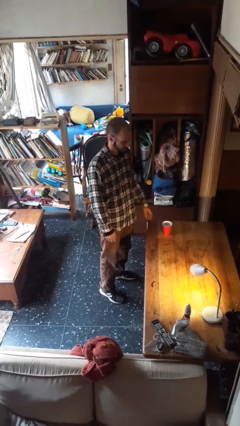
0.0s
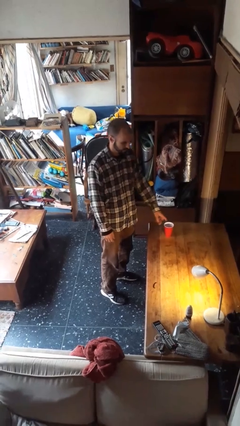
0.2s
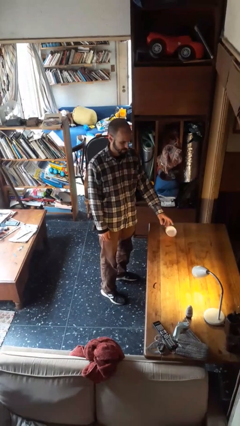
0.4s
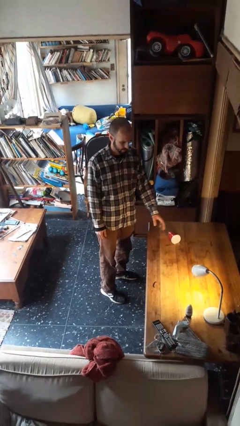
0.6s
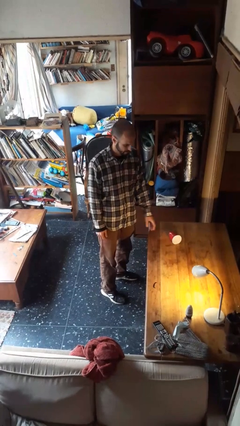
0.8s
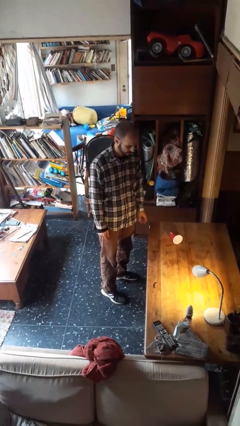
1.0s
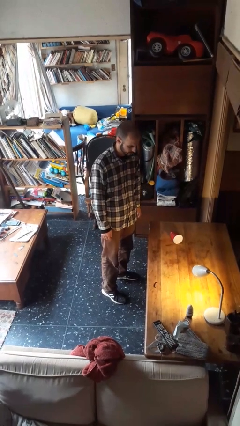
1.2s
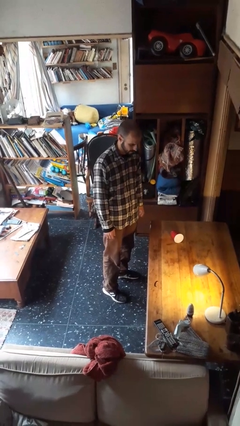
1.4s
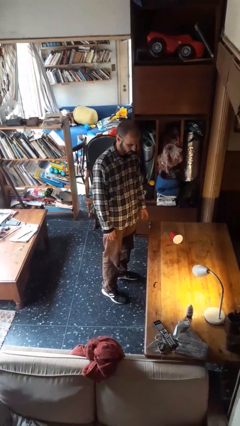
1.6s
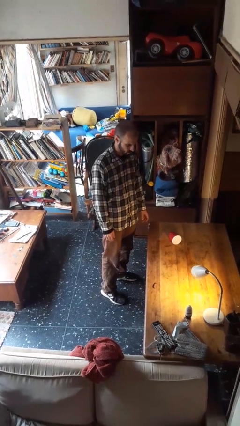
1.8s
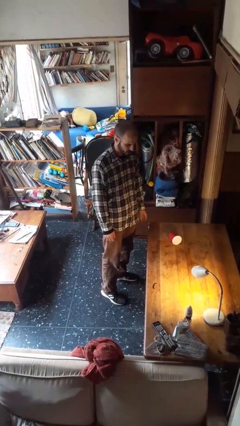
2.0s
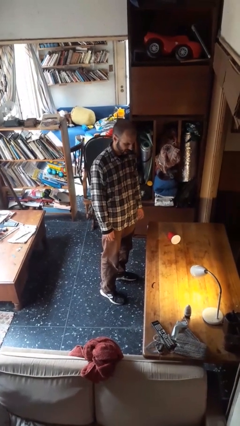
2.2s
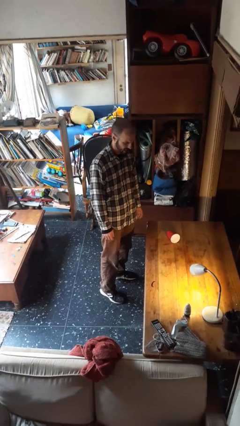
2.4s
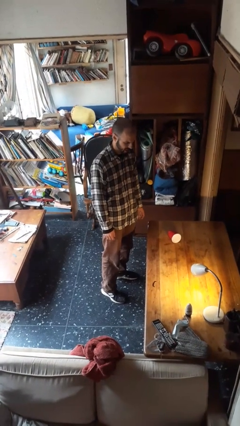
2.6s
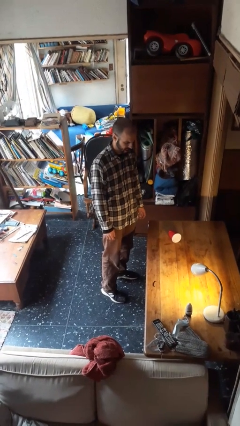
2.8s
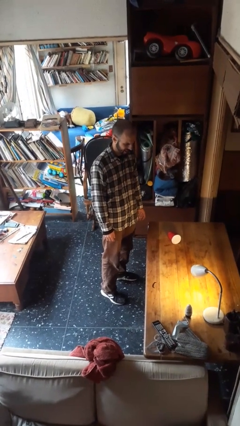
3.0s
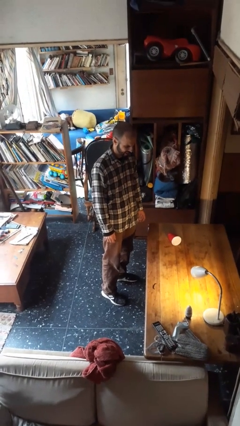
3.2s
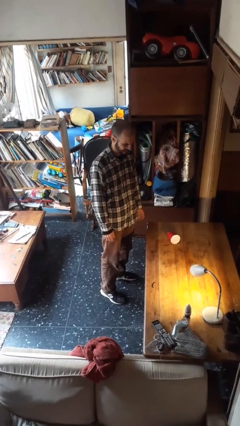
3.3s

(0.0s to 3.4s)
person spills on table

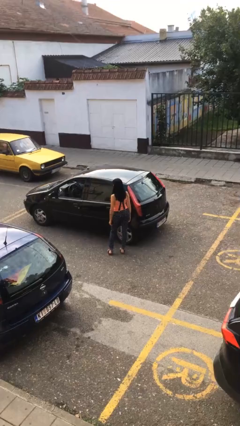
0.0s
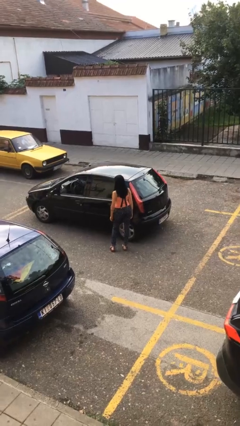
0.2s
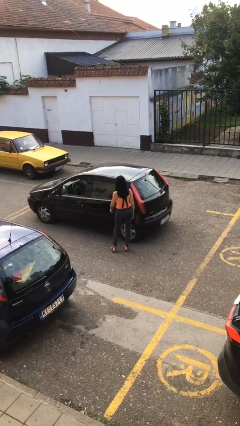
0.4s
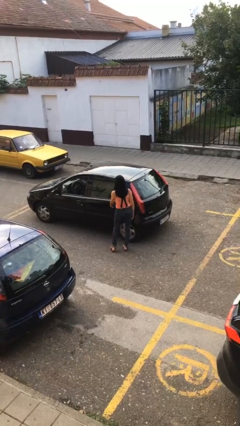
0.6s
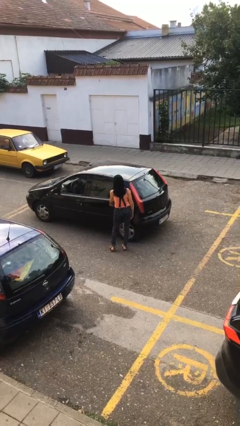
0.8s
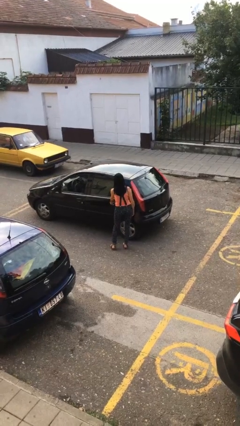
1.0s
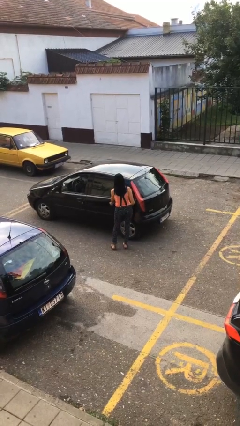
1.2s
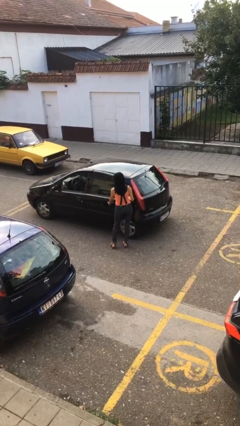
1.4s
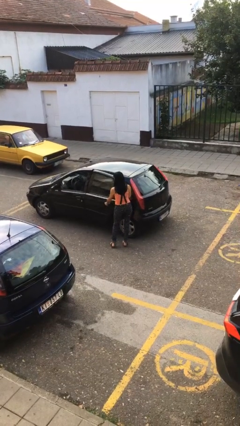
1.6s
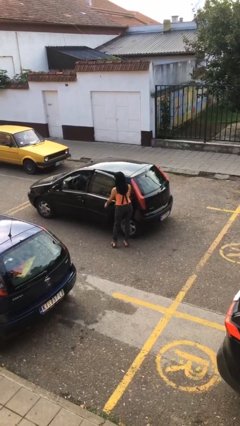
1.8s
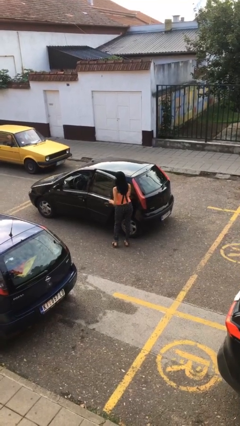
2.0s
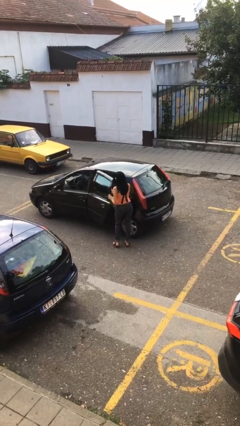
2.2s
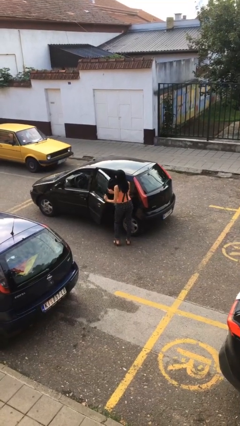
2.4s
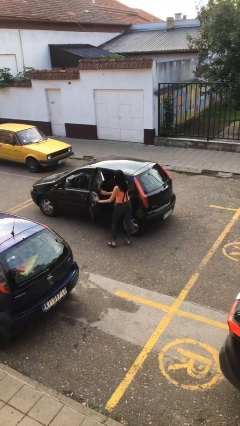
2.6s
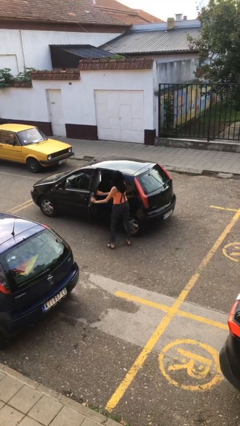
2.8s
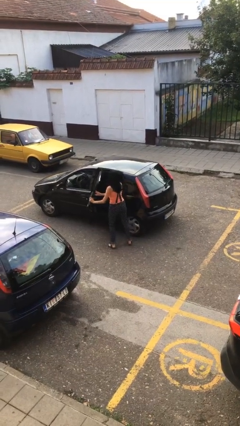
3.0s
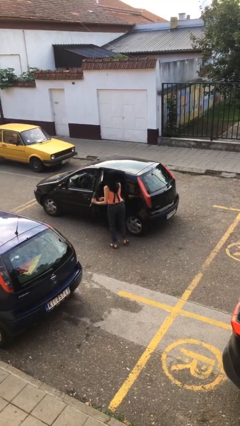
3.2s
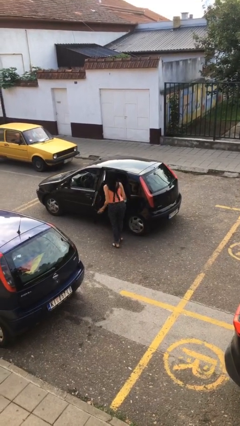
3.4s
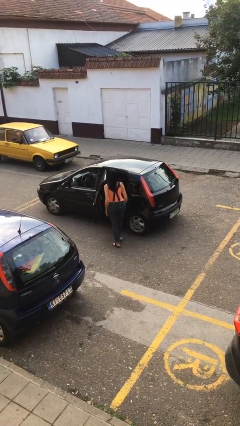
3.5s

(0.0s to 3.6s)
person opens car door

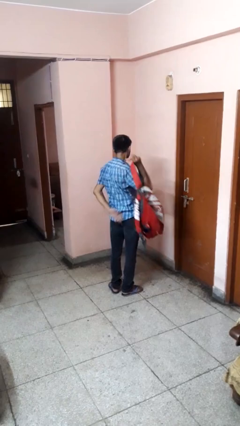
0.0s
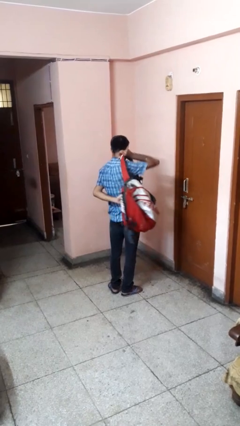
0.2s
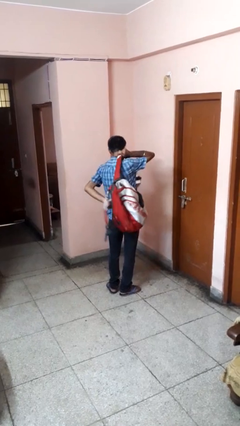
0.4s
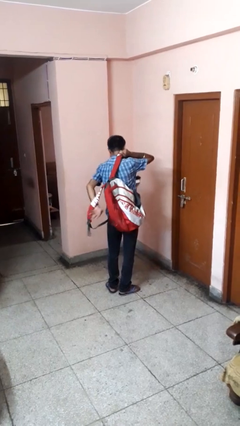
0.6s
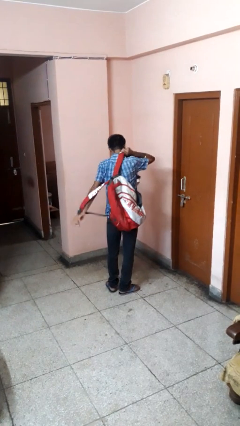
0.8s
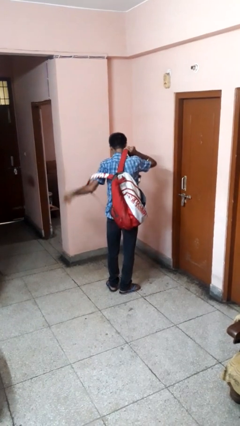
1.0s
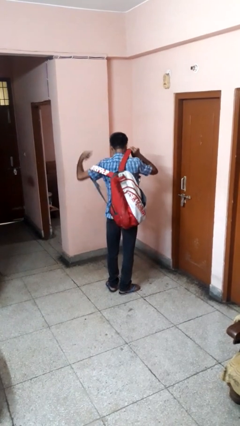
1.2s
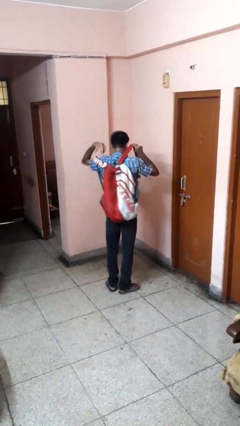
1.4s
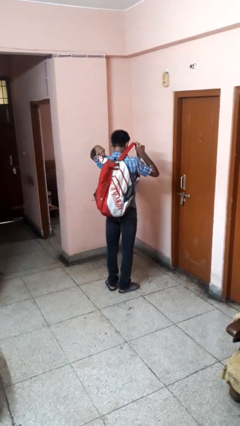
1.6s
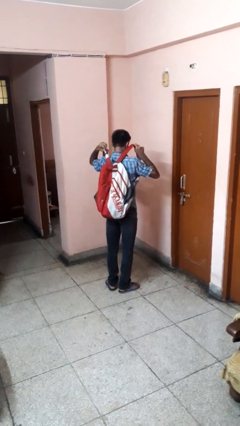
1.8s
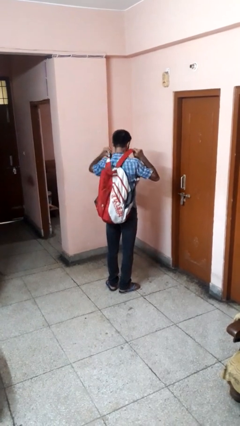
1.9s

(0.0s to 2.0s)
person puts on backpack

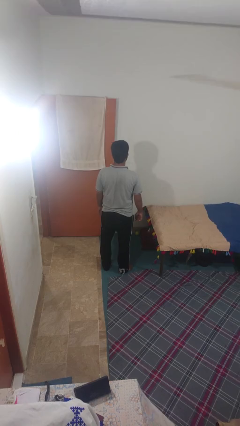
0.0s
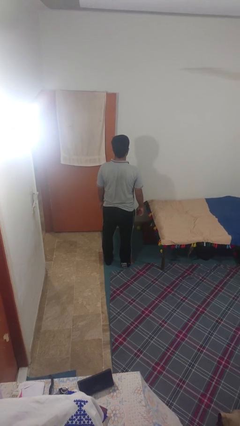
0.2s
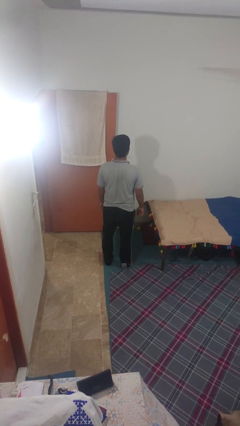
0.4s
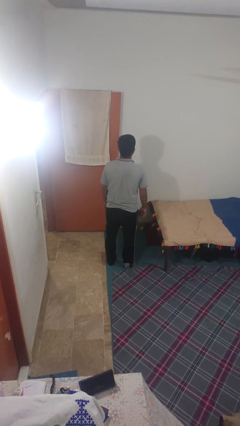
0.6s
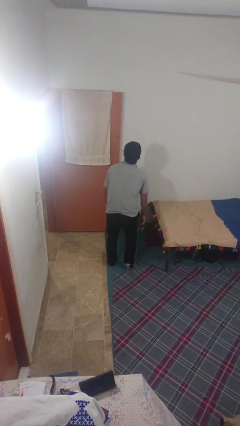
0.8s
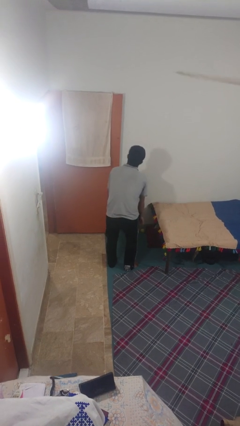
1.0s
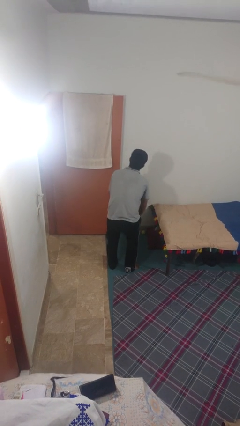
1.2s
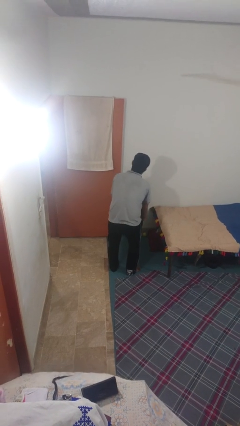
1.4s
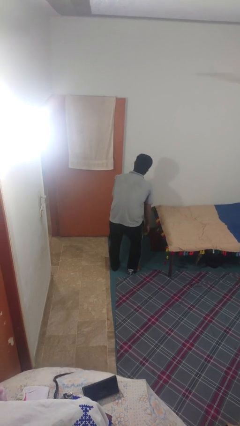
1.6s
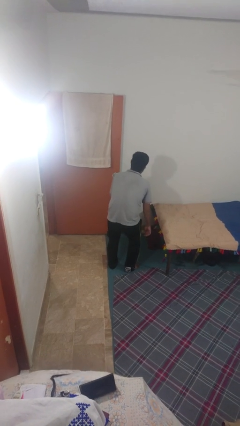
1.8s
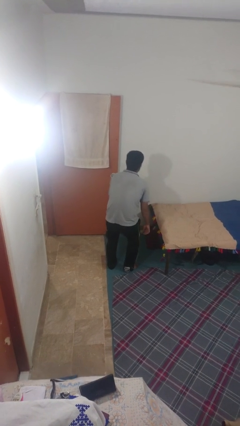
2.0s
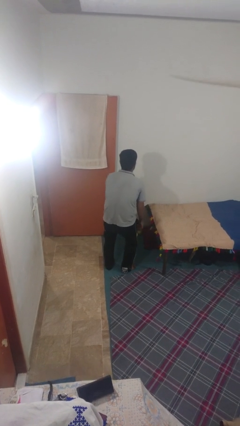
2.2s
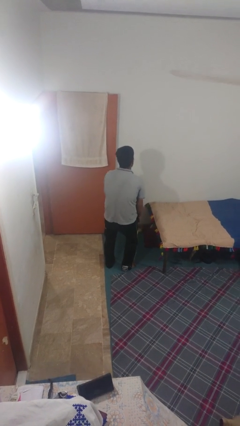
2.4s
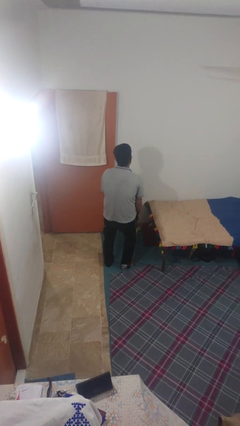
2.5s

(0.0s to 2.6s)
person gestures hang loose

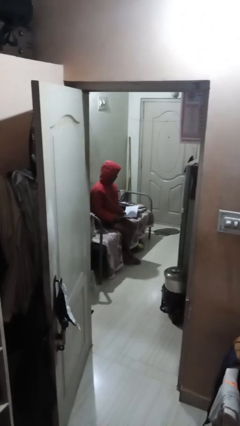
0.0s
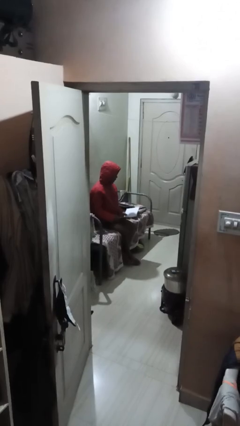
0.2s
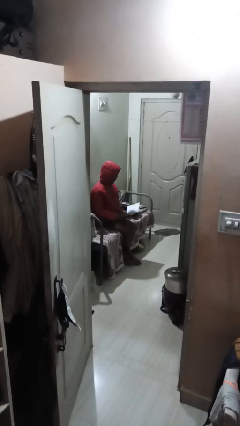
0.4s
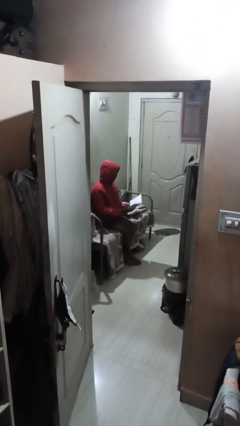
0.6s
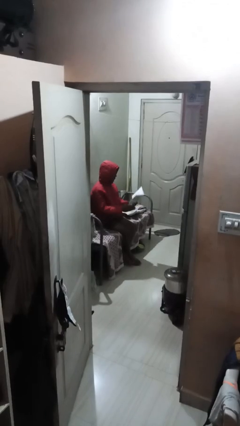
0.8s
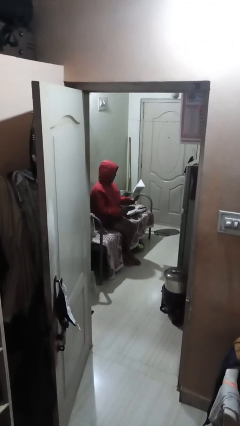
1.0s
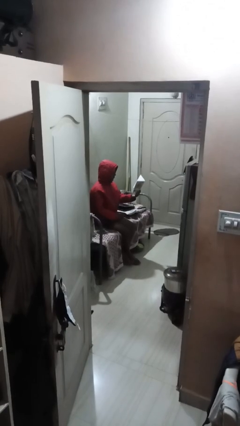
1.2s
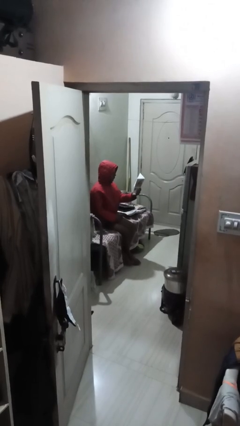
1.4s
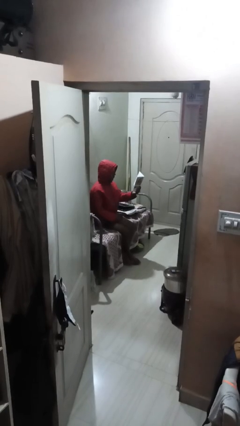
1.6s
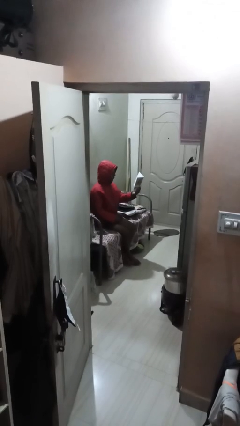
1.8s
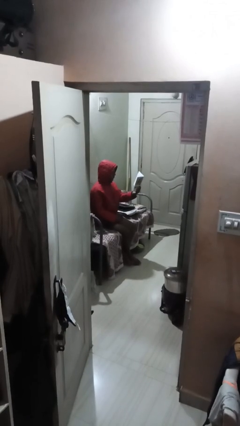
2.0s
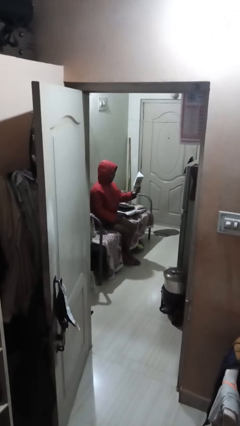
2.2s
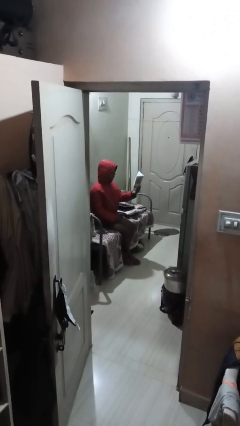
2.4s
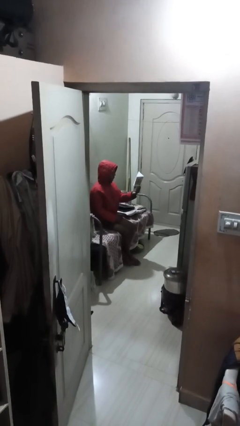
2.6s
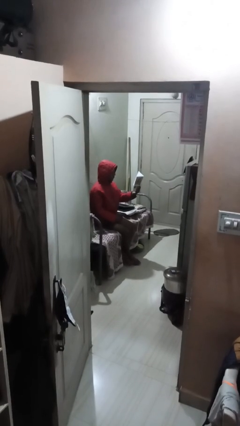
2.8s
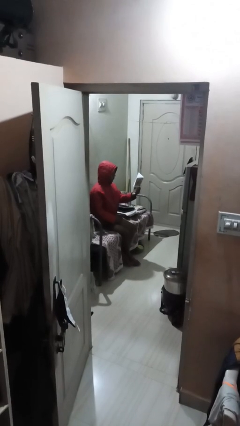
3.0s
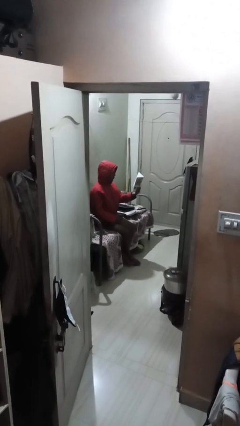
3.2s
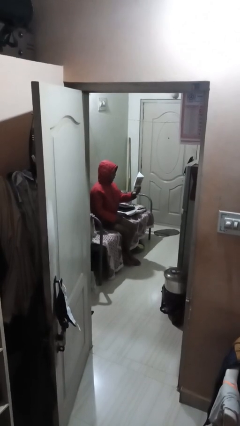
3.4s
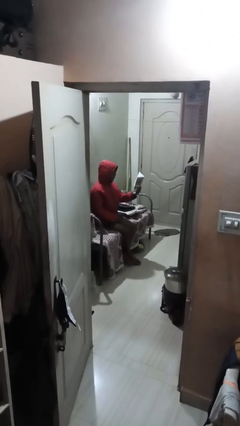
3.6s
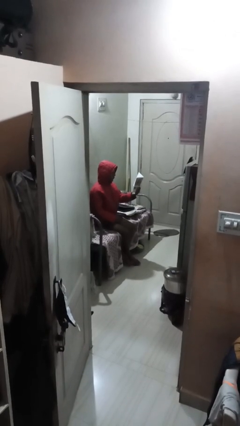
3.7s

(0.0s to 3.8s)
person reads document

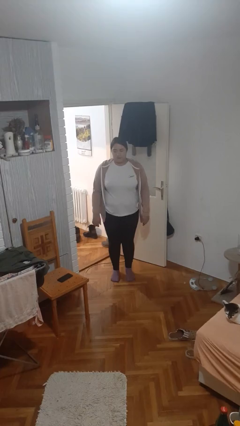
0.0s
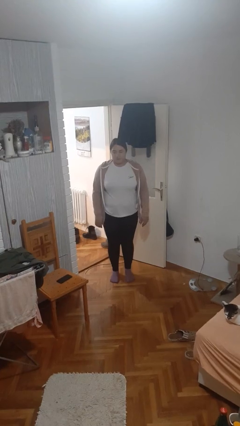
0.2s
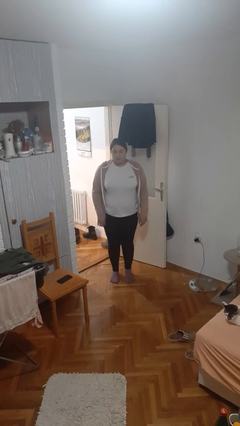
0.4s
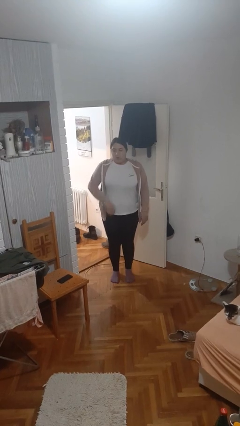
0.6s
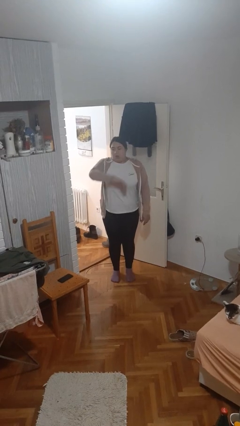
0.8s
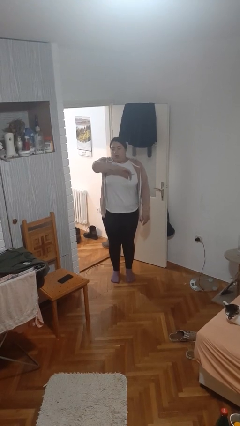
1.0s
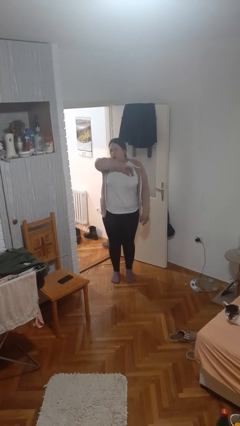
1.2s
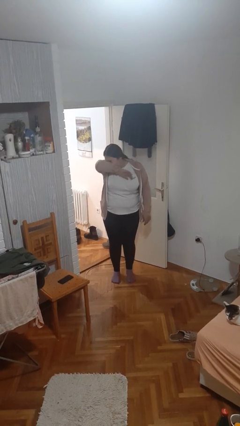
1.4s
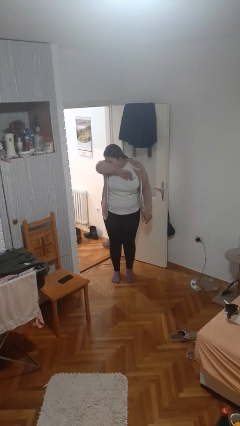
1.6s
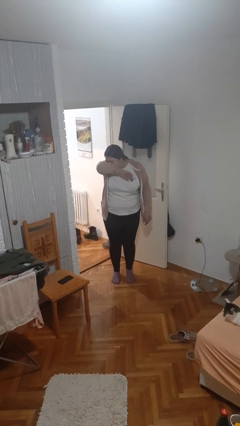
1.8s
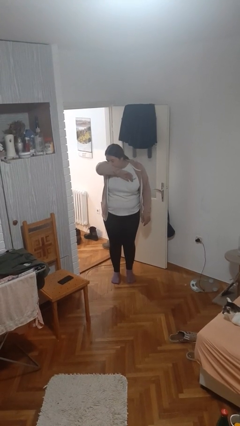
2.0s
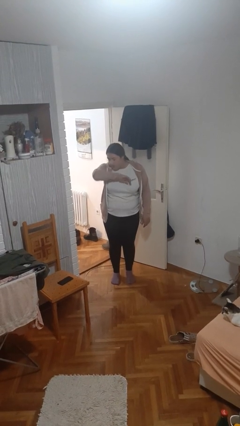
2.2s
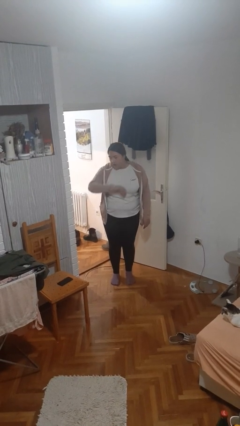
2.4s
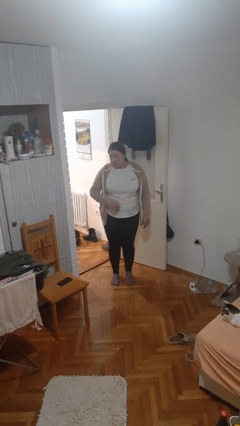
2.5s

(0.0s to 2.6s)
person sneezes into arm
